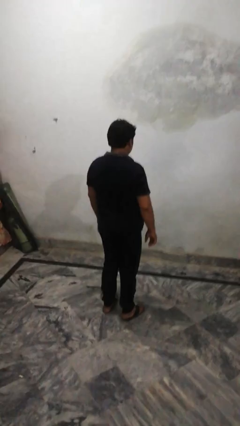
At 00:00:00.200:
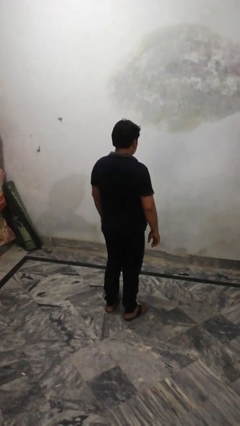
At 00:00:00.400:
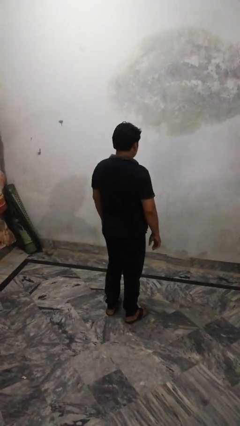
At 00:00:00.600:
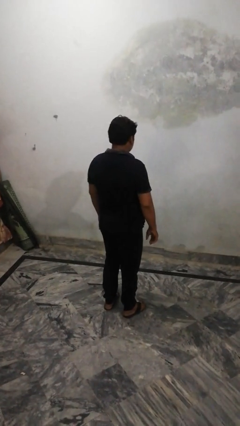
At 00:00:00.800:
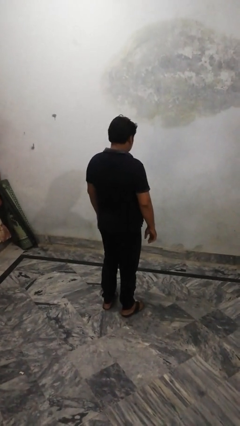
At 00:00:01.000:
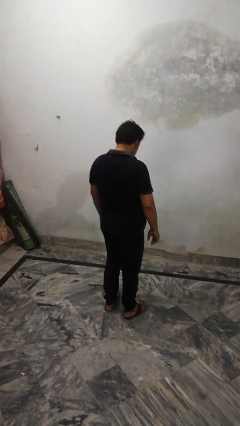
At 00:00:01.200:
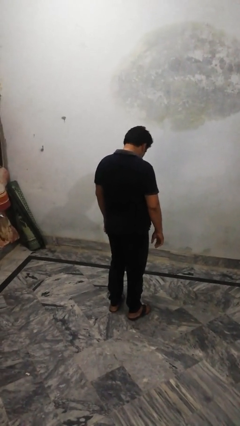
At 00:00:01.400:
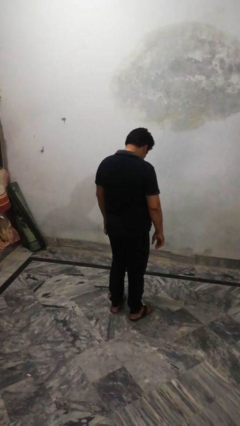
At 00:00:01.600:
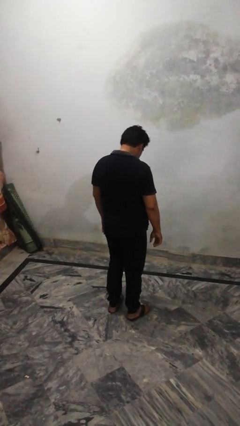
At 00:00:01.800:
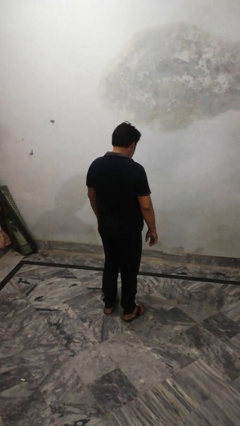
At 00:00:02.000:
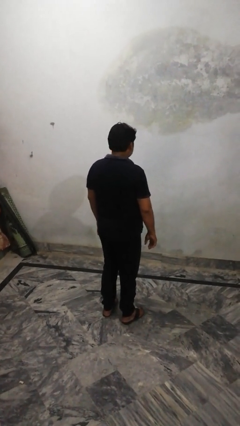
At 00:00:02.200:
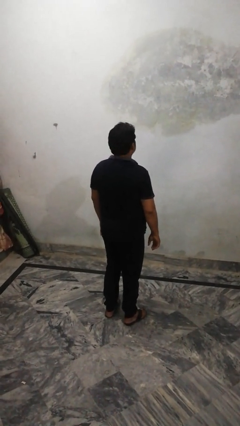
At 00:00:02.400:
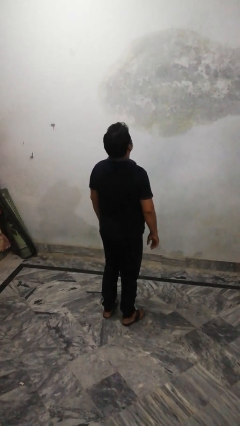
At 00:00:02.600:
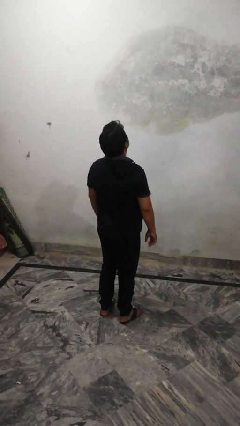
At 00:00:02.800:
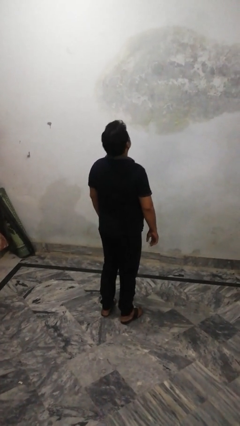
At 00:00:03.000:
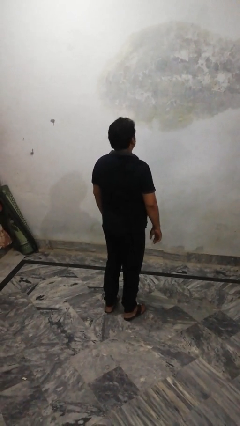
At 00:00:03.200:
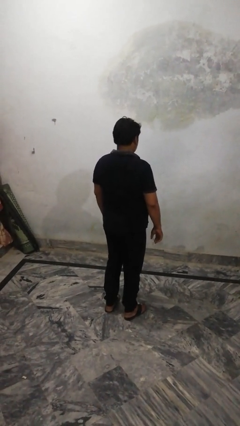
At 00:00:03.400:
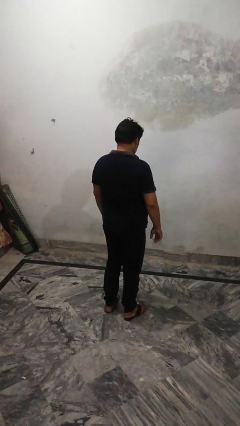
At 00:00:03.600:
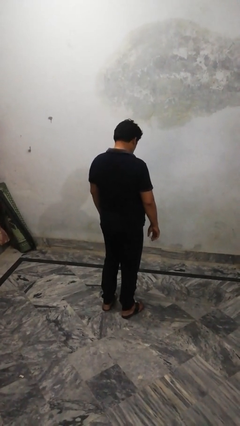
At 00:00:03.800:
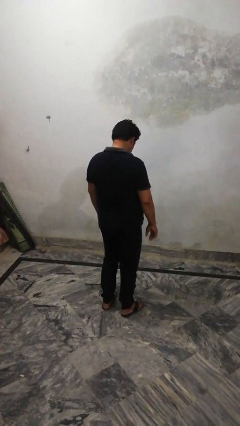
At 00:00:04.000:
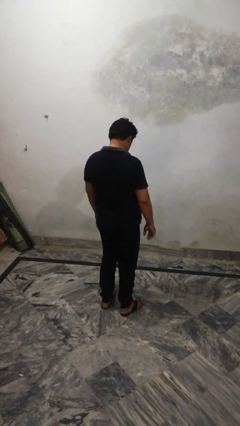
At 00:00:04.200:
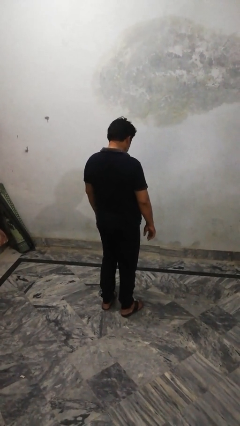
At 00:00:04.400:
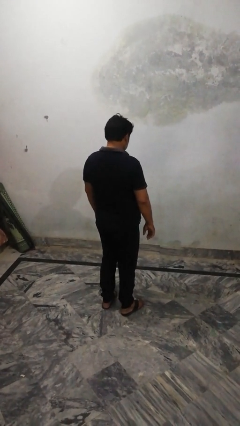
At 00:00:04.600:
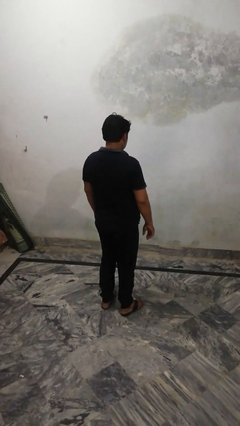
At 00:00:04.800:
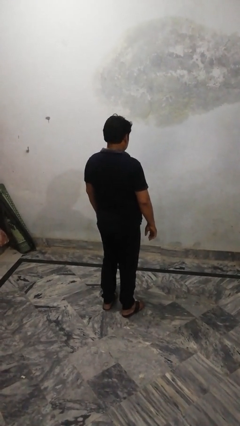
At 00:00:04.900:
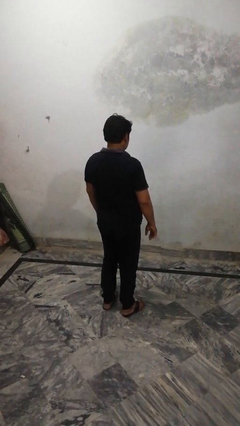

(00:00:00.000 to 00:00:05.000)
person nods head

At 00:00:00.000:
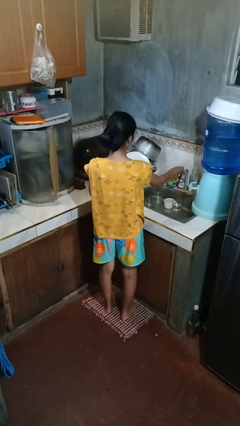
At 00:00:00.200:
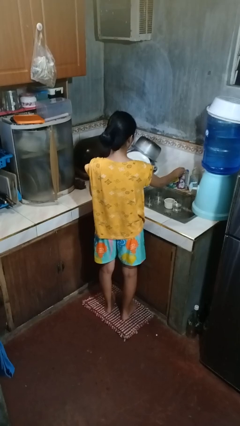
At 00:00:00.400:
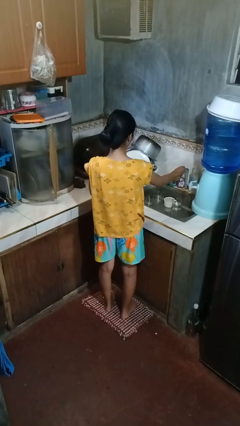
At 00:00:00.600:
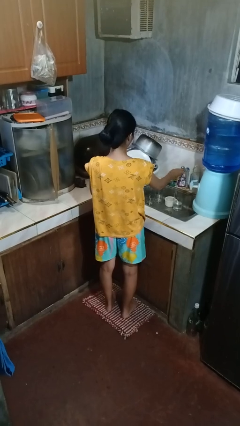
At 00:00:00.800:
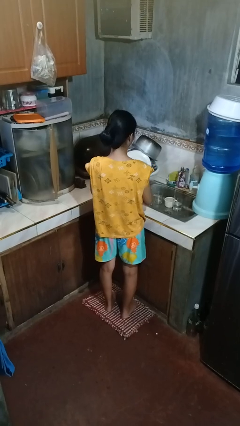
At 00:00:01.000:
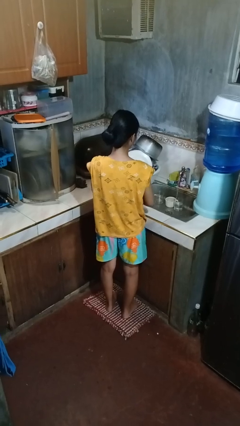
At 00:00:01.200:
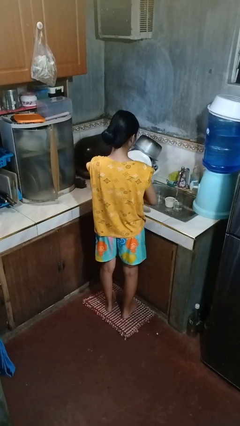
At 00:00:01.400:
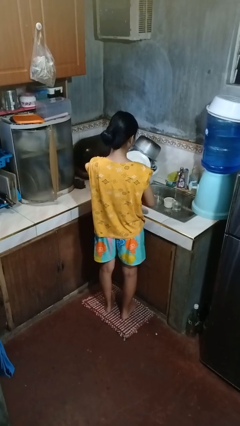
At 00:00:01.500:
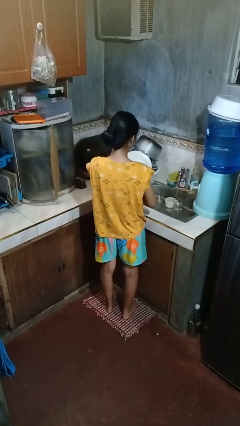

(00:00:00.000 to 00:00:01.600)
person turns on faucet

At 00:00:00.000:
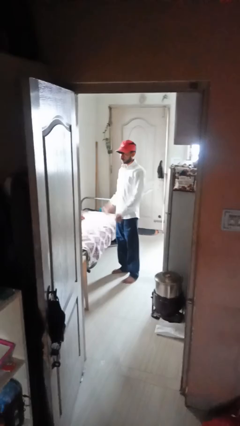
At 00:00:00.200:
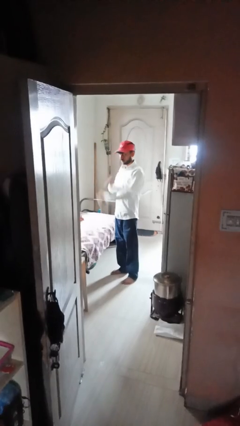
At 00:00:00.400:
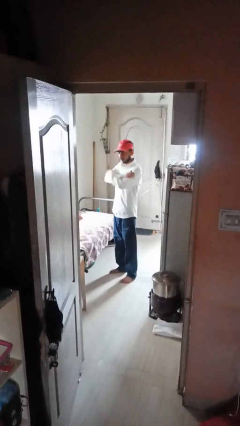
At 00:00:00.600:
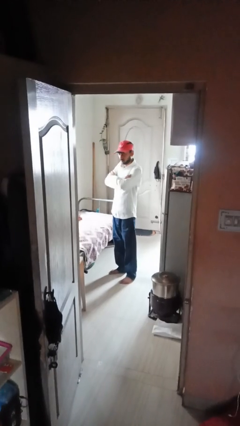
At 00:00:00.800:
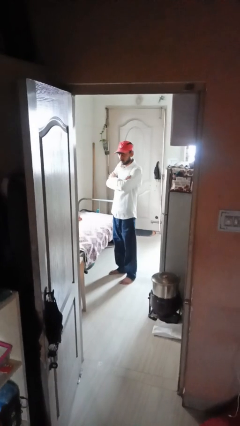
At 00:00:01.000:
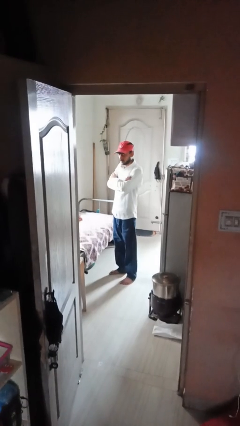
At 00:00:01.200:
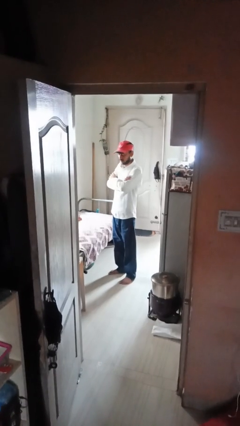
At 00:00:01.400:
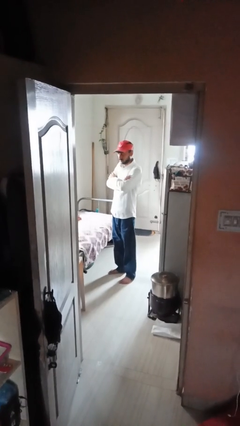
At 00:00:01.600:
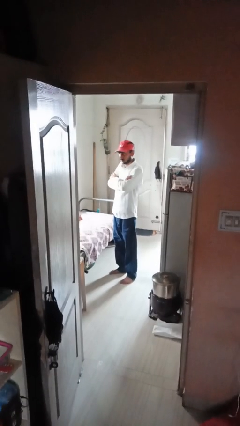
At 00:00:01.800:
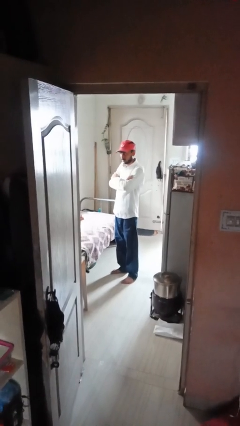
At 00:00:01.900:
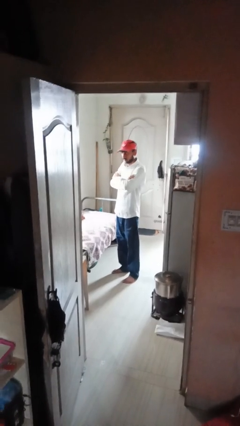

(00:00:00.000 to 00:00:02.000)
person crosses arms

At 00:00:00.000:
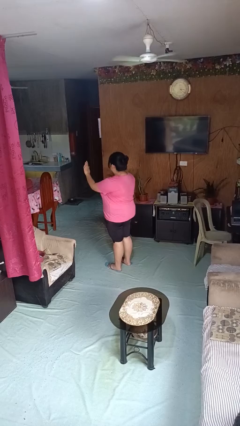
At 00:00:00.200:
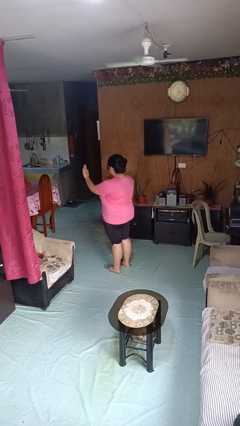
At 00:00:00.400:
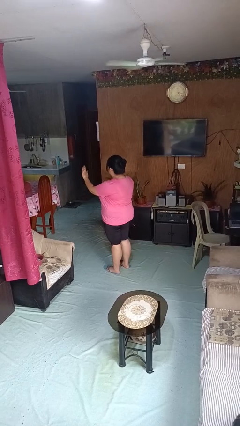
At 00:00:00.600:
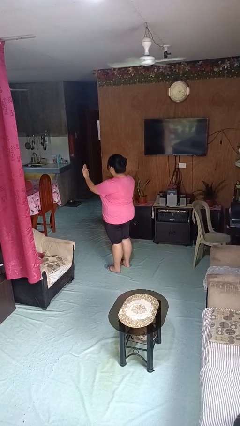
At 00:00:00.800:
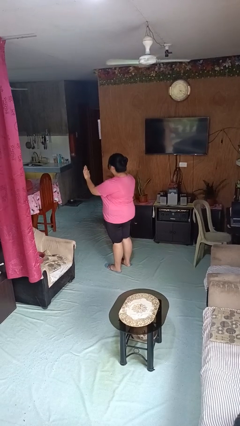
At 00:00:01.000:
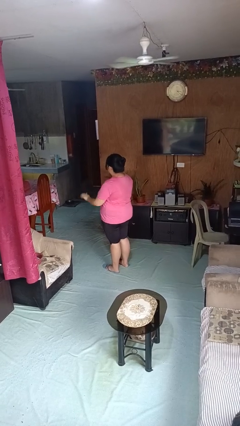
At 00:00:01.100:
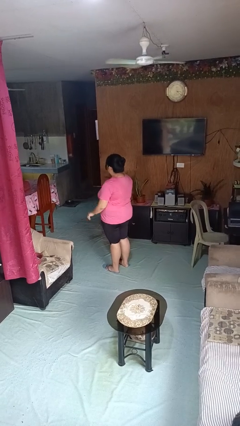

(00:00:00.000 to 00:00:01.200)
person gestures stop

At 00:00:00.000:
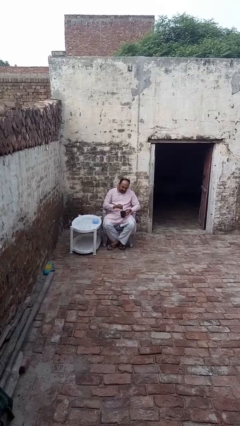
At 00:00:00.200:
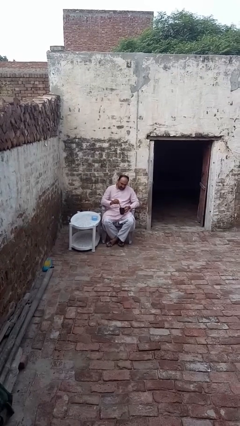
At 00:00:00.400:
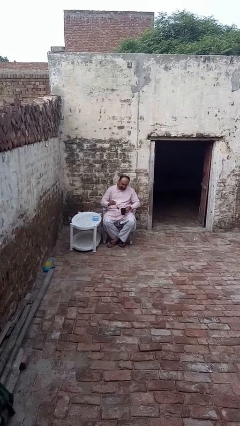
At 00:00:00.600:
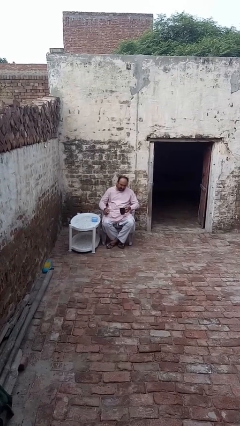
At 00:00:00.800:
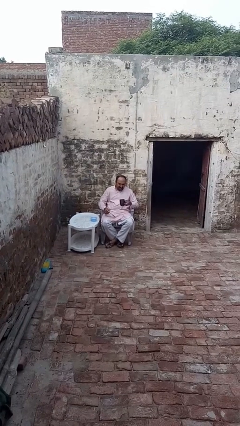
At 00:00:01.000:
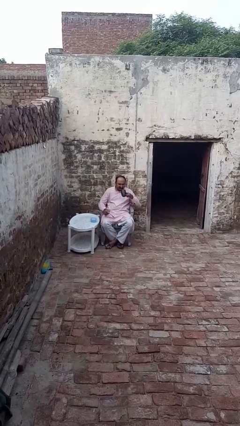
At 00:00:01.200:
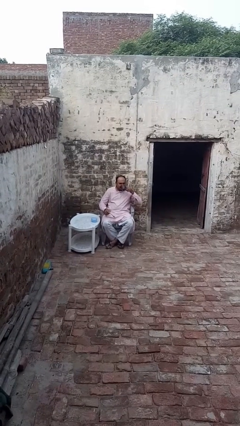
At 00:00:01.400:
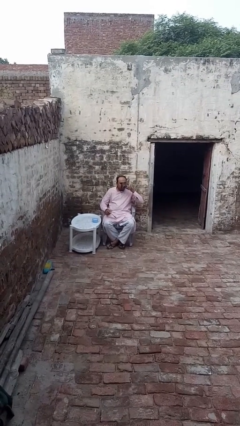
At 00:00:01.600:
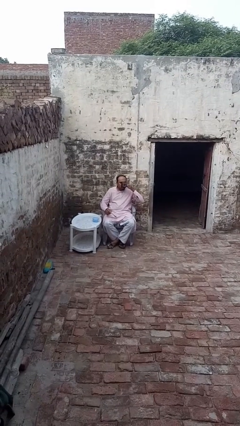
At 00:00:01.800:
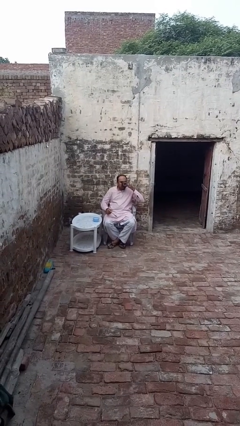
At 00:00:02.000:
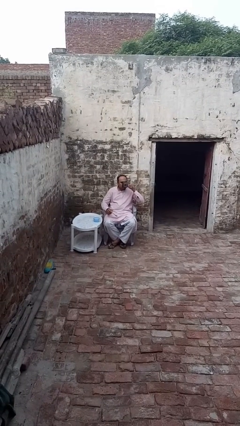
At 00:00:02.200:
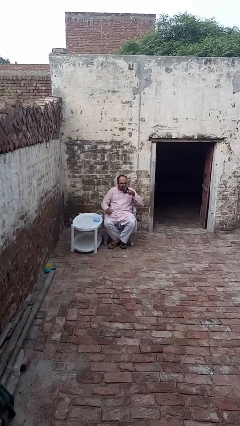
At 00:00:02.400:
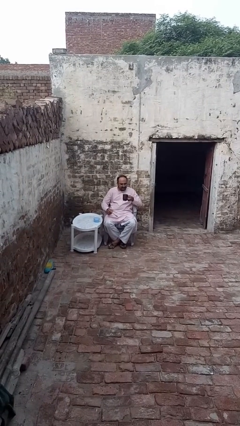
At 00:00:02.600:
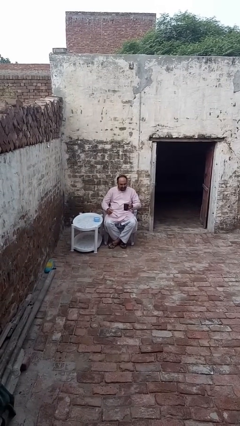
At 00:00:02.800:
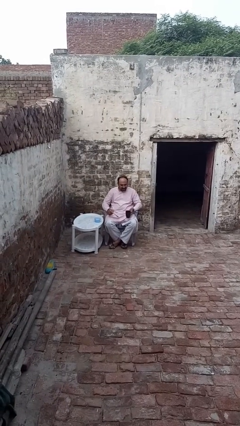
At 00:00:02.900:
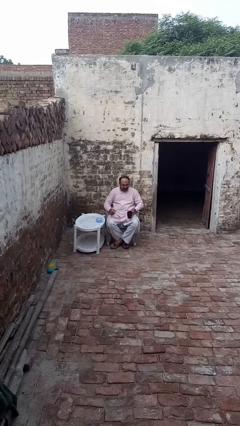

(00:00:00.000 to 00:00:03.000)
person drinks from mug

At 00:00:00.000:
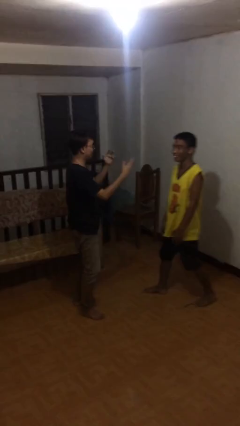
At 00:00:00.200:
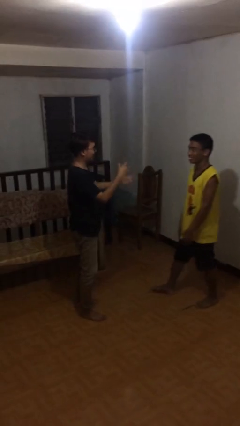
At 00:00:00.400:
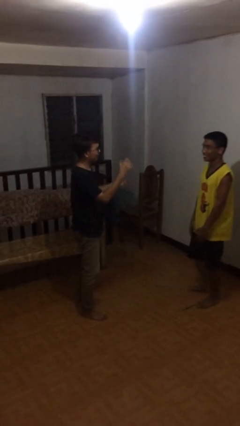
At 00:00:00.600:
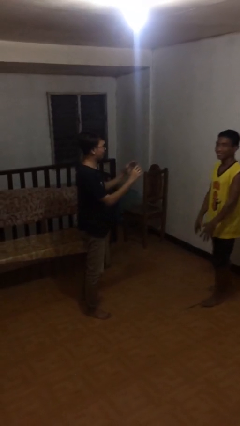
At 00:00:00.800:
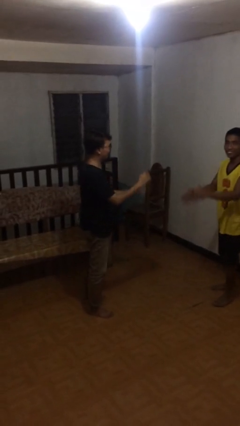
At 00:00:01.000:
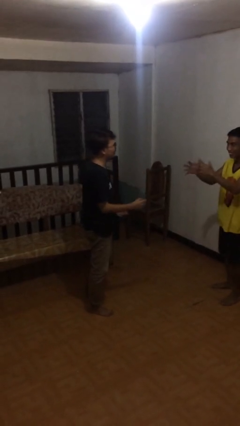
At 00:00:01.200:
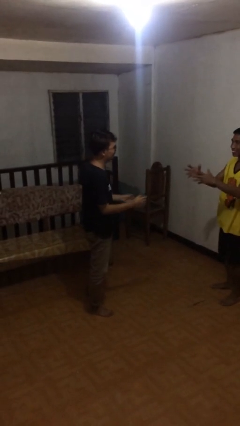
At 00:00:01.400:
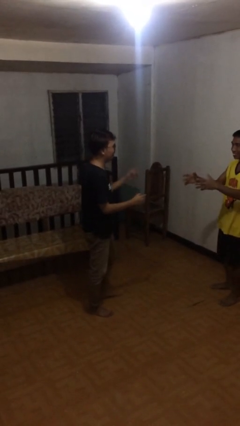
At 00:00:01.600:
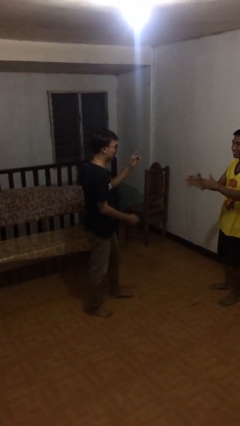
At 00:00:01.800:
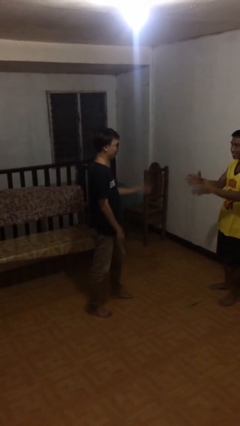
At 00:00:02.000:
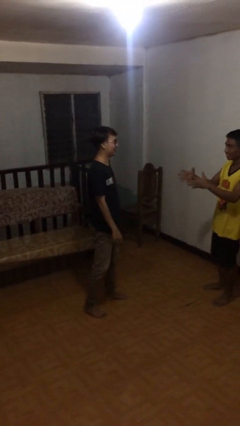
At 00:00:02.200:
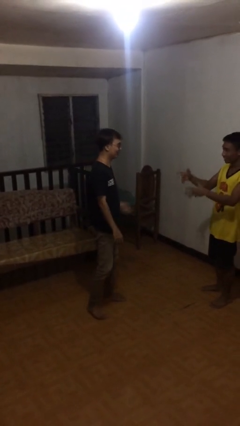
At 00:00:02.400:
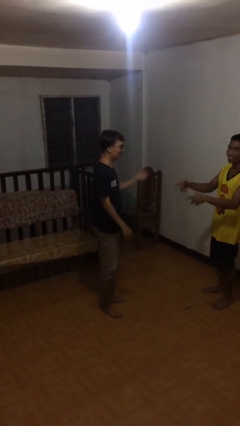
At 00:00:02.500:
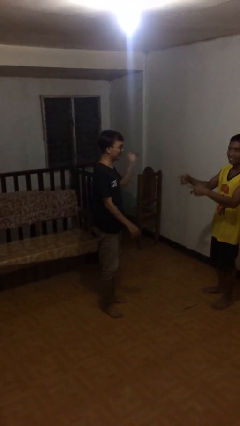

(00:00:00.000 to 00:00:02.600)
person talks to person

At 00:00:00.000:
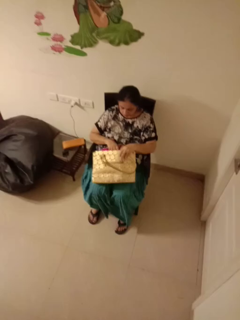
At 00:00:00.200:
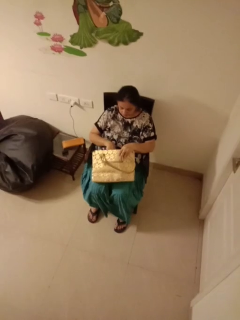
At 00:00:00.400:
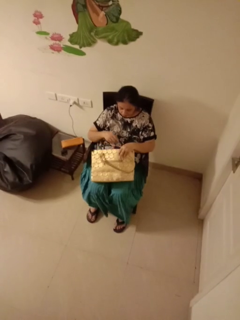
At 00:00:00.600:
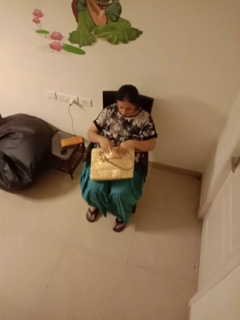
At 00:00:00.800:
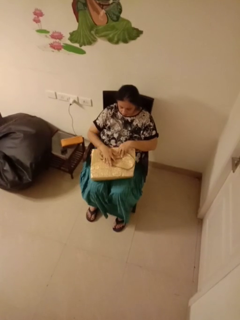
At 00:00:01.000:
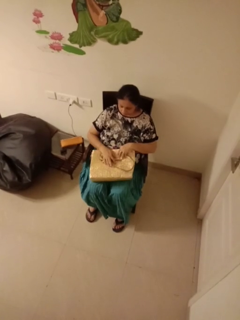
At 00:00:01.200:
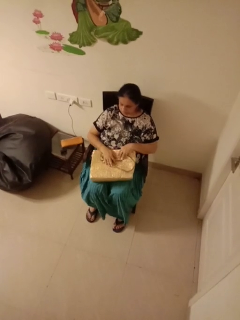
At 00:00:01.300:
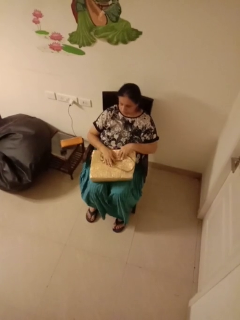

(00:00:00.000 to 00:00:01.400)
person puts object into purse
